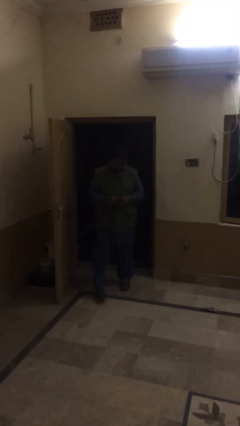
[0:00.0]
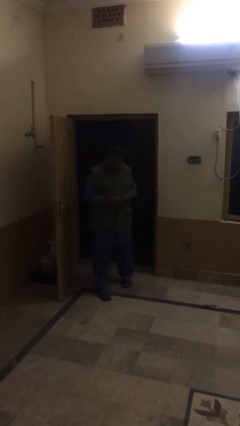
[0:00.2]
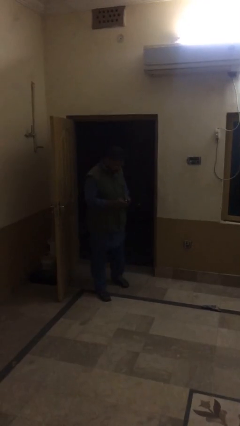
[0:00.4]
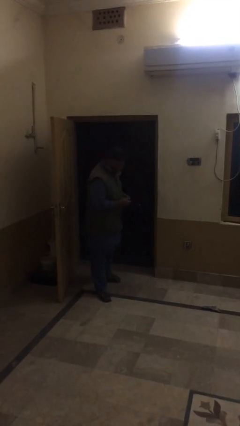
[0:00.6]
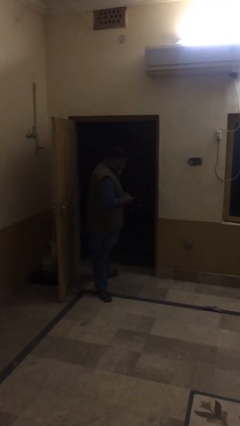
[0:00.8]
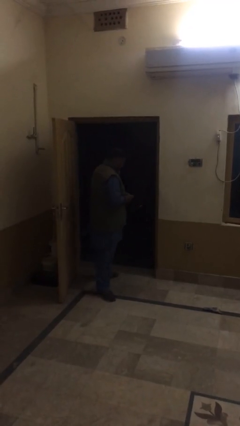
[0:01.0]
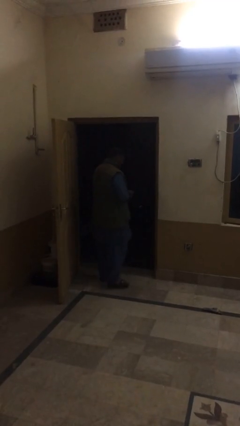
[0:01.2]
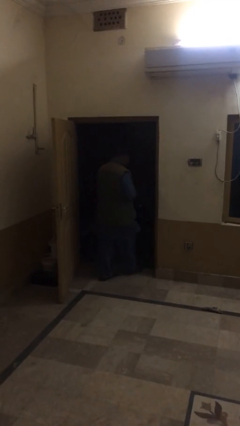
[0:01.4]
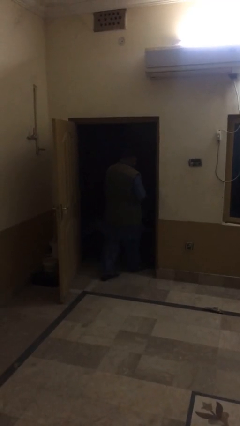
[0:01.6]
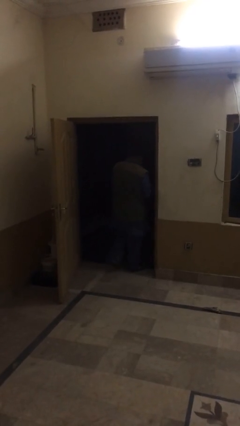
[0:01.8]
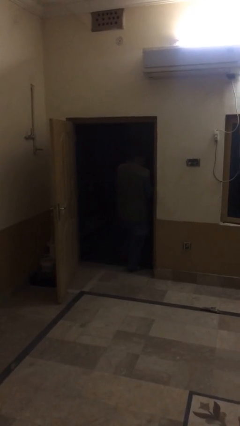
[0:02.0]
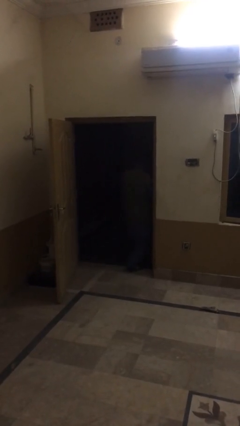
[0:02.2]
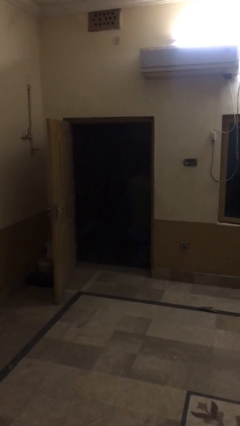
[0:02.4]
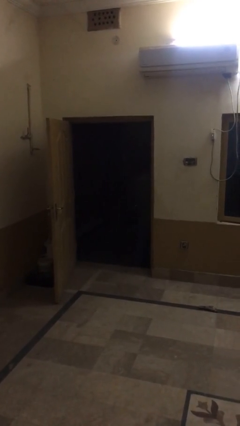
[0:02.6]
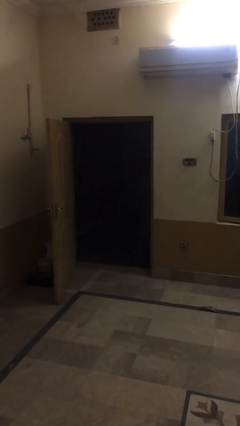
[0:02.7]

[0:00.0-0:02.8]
person exits scene through structure

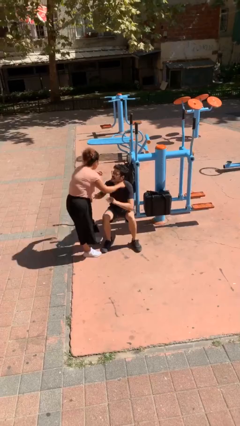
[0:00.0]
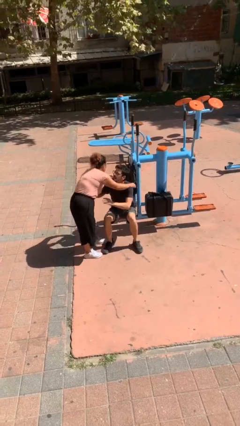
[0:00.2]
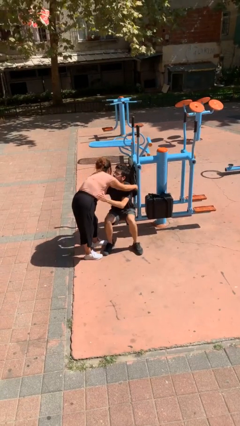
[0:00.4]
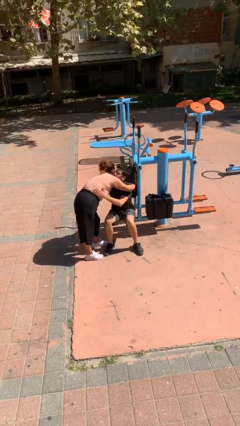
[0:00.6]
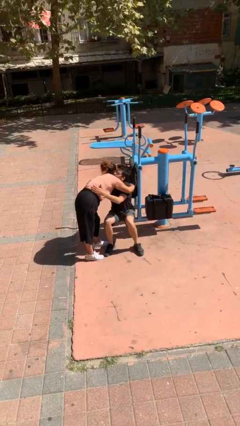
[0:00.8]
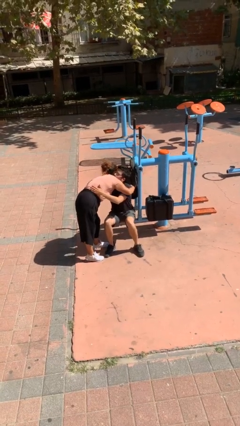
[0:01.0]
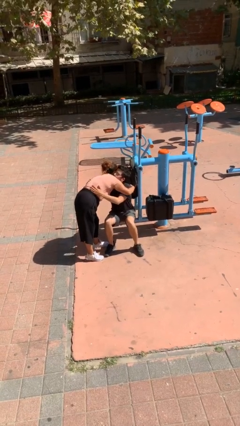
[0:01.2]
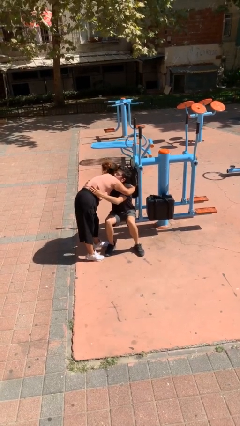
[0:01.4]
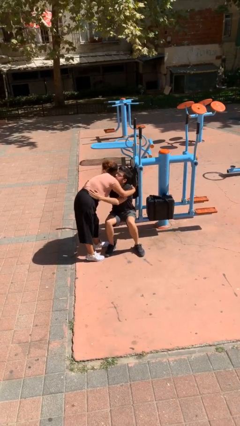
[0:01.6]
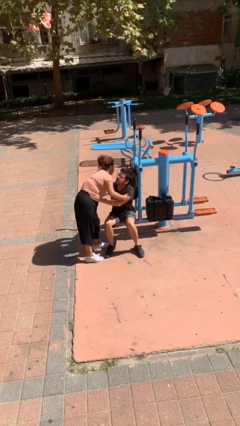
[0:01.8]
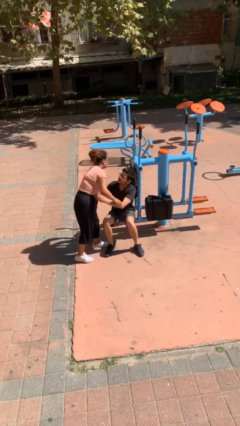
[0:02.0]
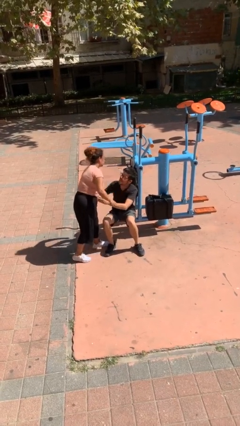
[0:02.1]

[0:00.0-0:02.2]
person embraces person

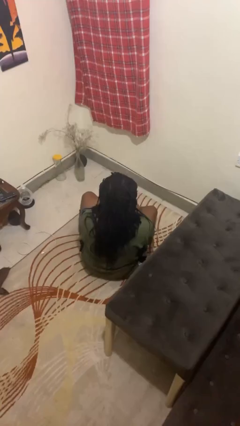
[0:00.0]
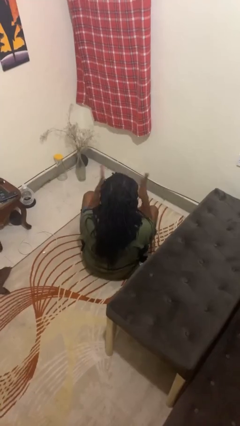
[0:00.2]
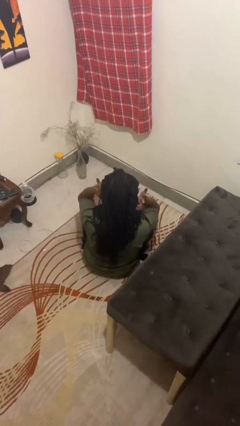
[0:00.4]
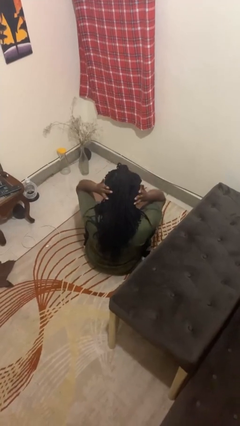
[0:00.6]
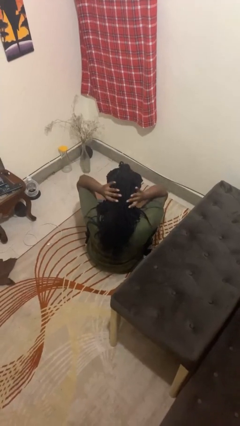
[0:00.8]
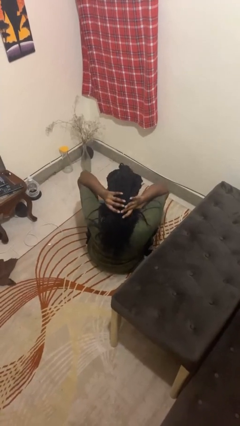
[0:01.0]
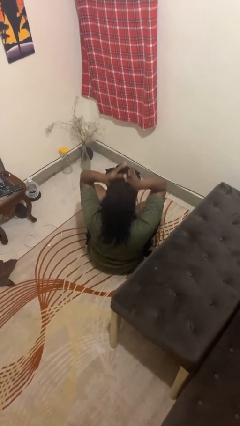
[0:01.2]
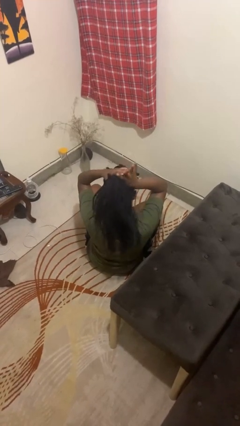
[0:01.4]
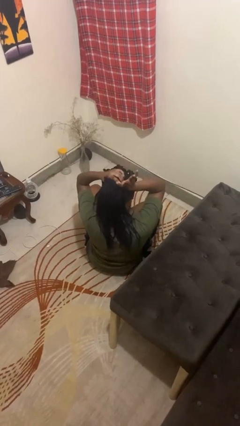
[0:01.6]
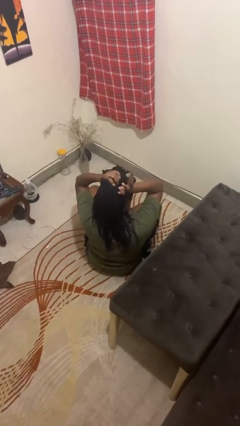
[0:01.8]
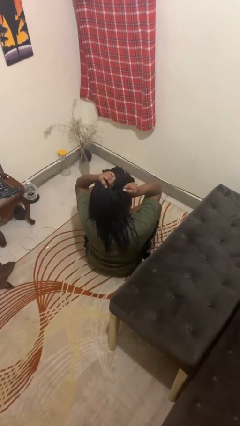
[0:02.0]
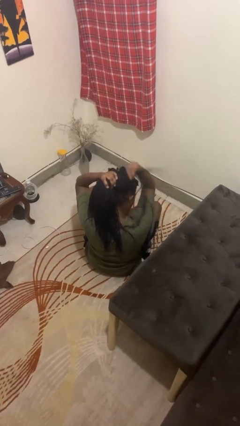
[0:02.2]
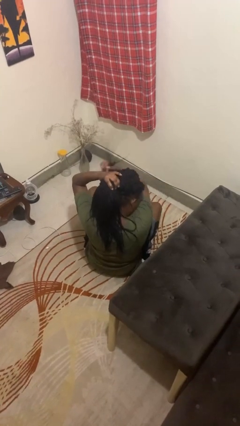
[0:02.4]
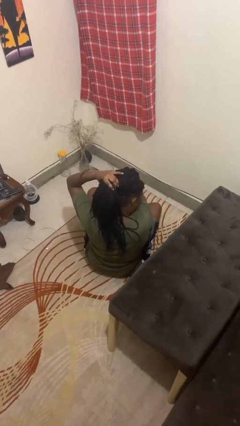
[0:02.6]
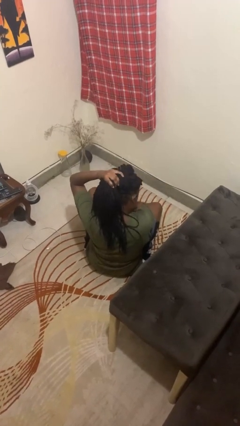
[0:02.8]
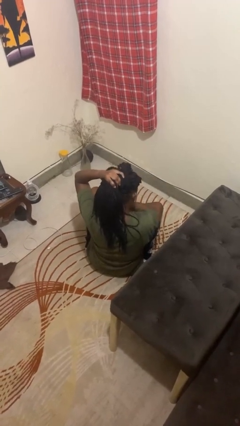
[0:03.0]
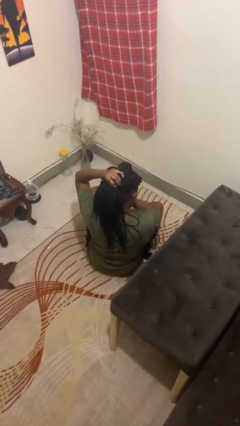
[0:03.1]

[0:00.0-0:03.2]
person puts hair in ponytail

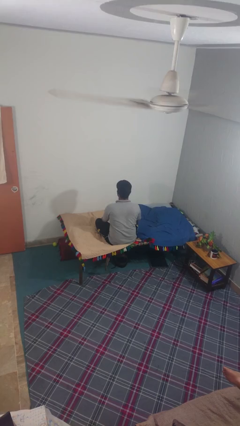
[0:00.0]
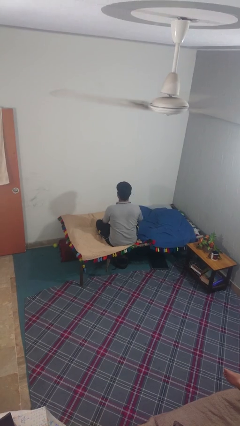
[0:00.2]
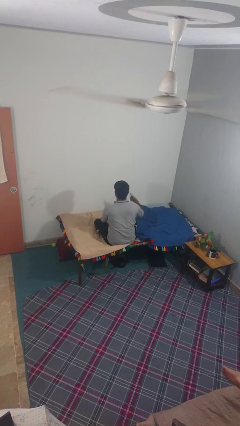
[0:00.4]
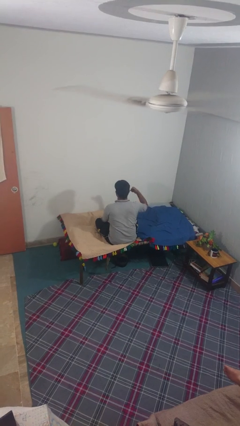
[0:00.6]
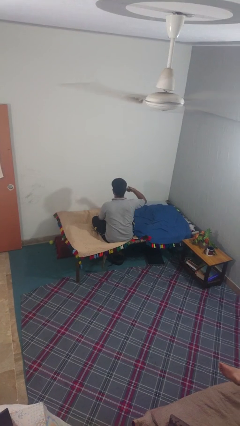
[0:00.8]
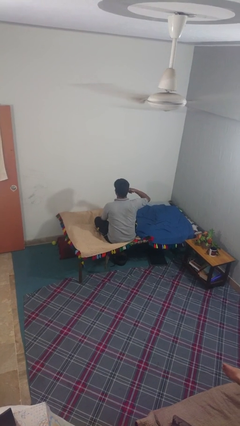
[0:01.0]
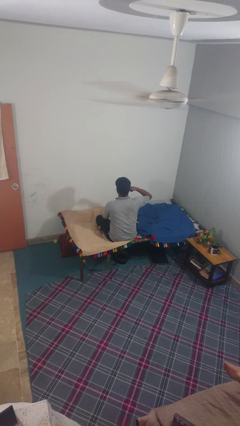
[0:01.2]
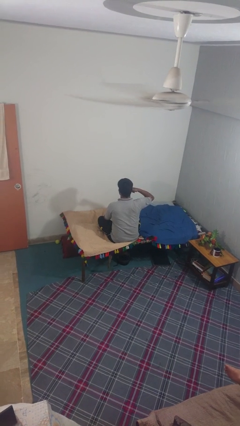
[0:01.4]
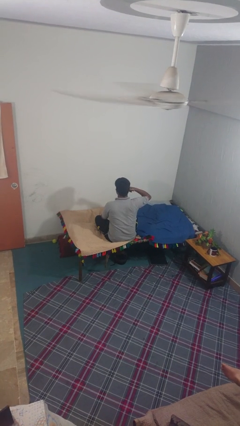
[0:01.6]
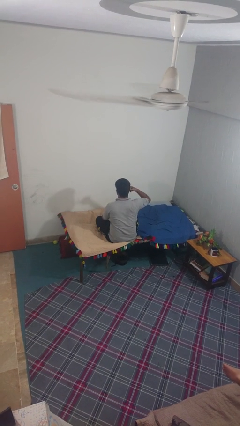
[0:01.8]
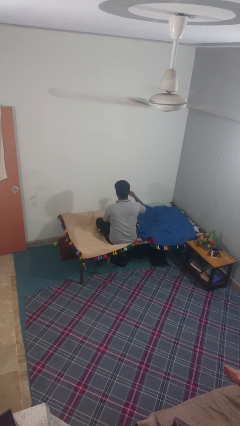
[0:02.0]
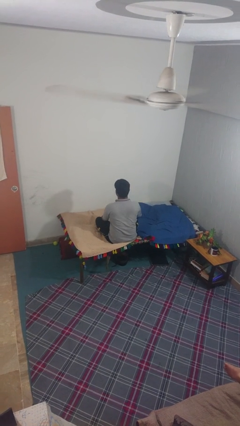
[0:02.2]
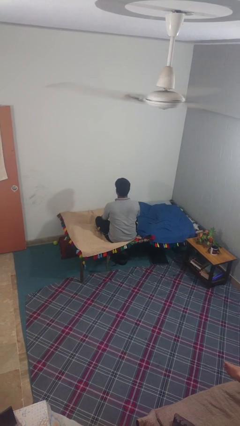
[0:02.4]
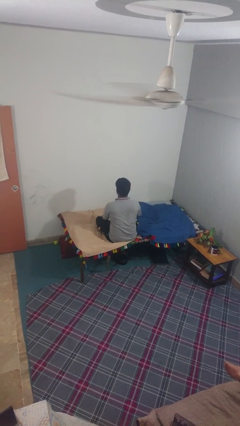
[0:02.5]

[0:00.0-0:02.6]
person gestures call me

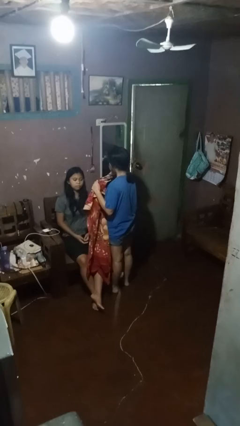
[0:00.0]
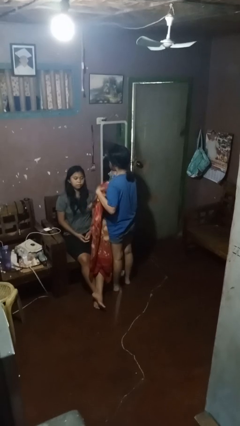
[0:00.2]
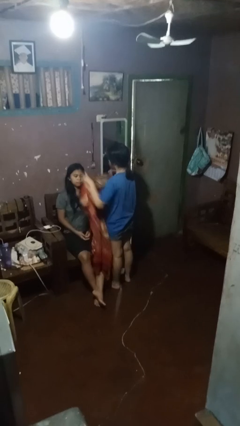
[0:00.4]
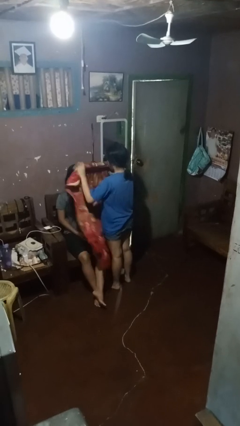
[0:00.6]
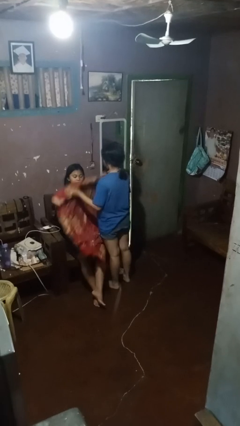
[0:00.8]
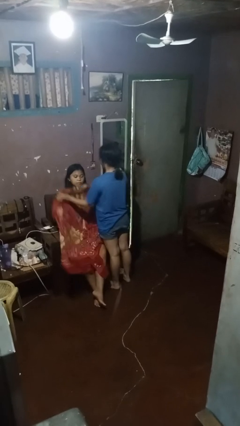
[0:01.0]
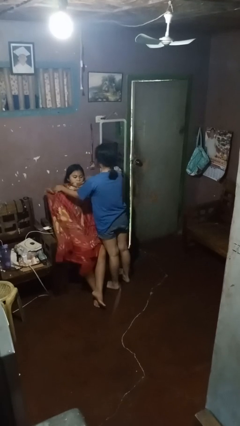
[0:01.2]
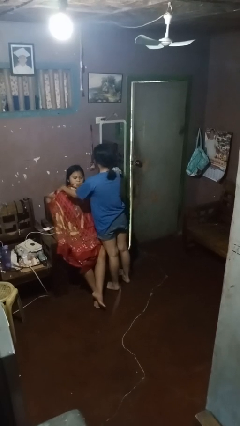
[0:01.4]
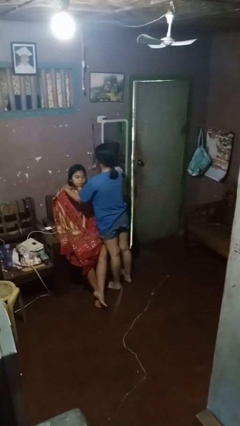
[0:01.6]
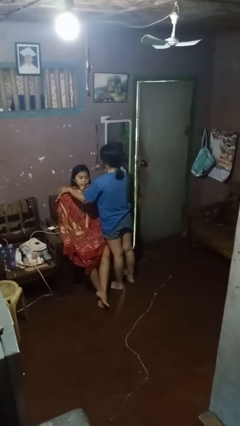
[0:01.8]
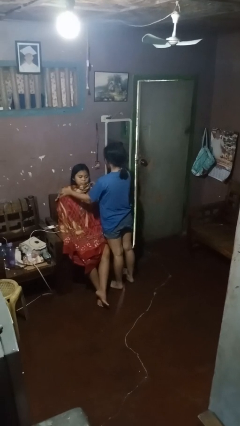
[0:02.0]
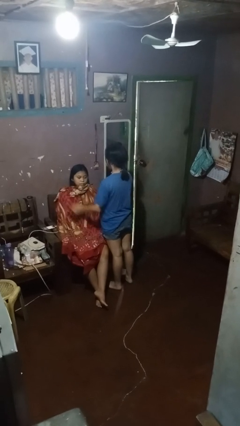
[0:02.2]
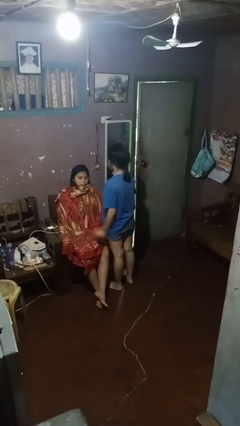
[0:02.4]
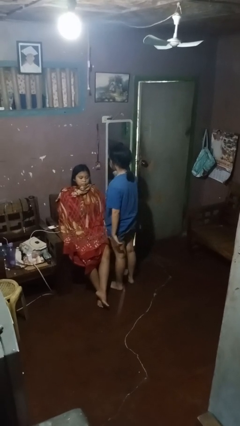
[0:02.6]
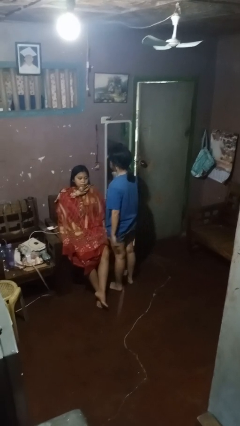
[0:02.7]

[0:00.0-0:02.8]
person covers friend with blanket

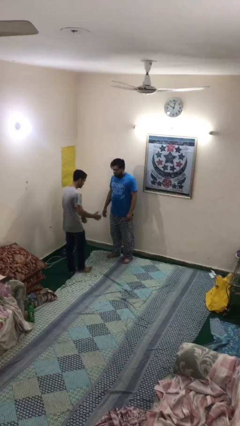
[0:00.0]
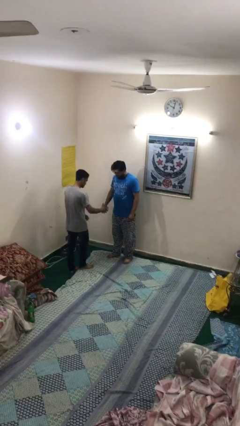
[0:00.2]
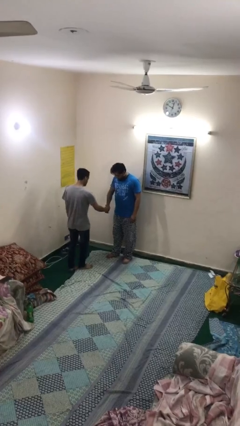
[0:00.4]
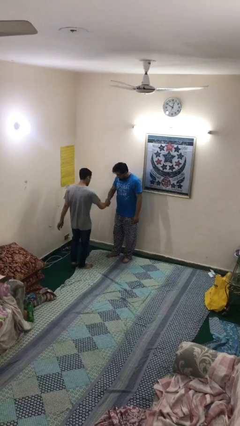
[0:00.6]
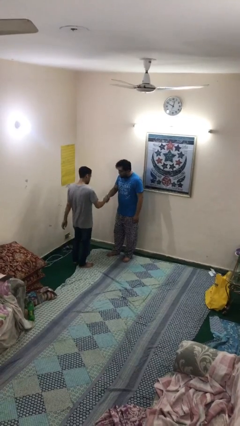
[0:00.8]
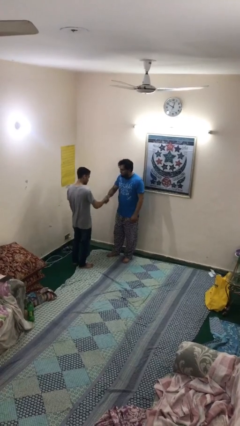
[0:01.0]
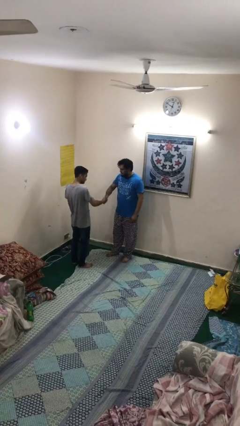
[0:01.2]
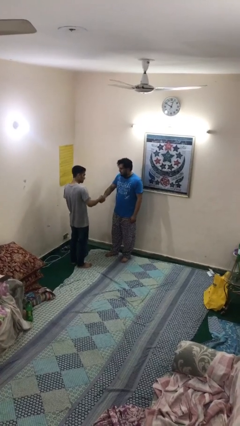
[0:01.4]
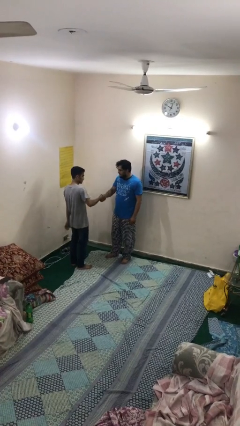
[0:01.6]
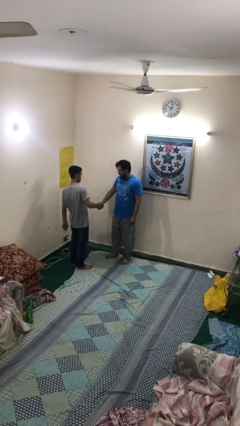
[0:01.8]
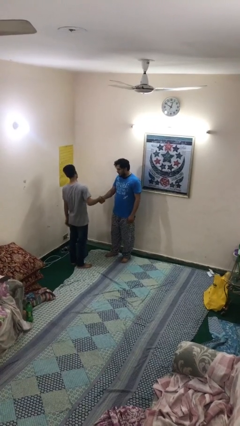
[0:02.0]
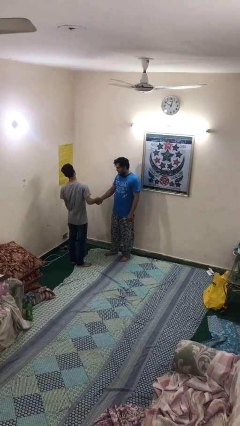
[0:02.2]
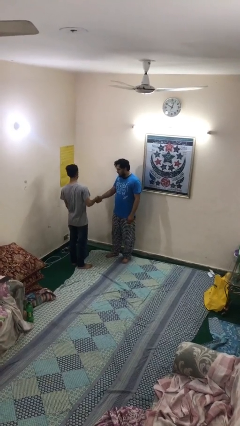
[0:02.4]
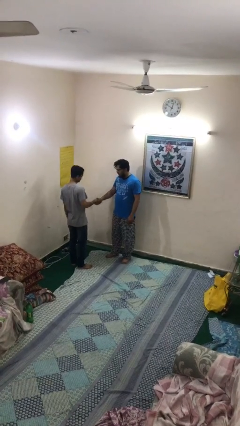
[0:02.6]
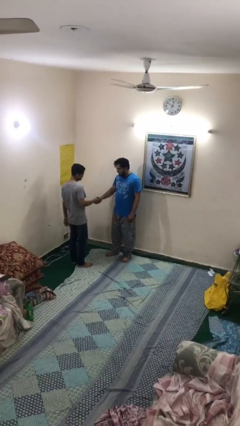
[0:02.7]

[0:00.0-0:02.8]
person shakes hand

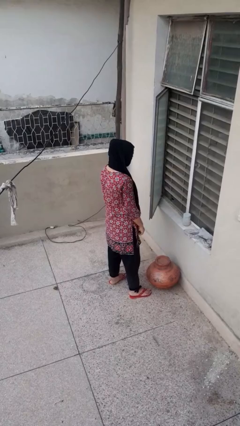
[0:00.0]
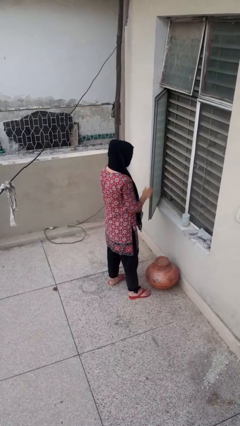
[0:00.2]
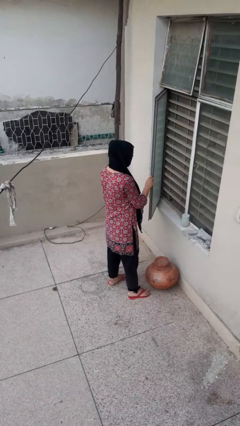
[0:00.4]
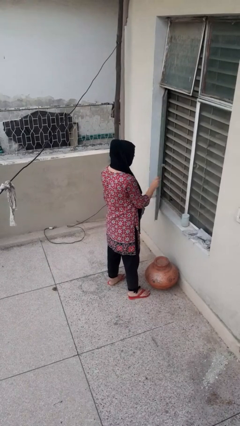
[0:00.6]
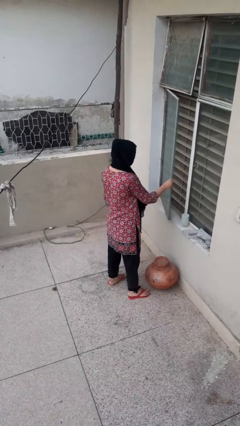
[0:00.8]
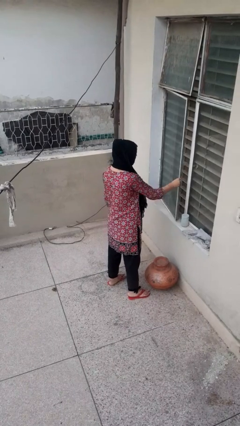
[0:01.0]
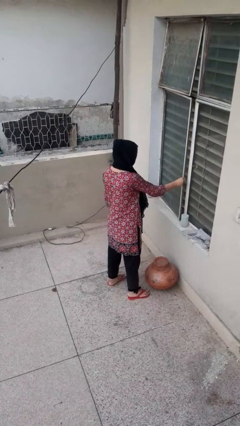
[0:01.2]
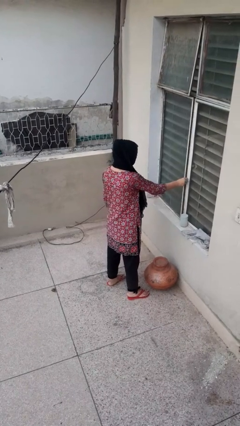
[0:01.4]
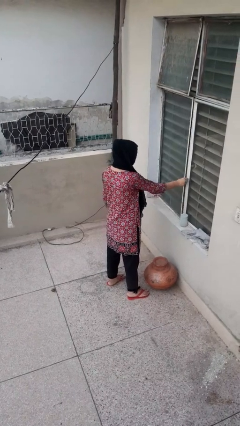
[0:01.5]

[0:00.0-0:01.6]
person closes home window
